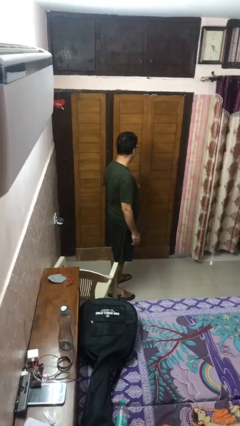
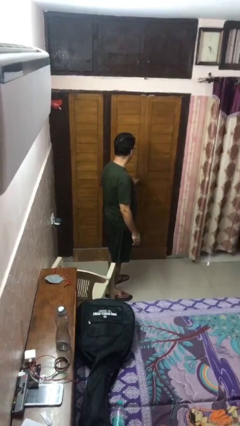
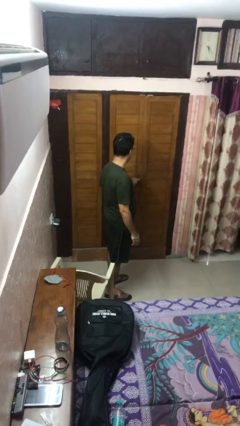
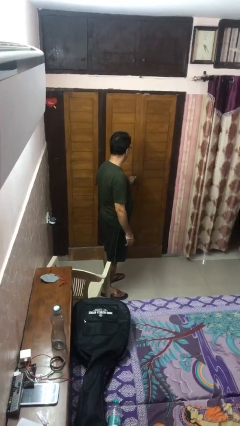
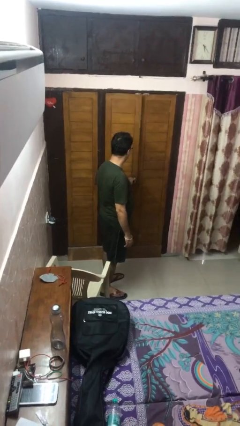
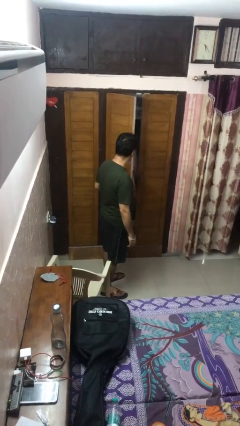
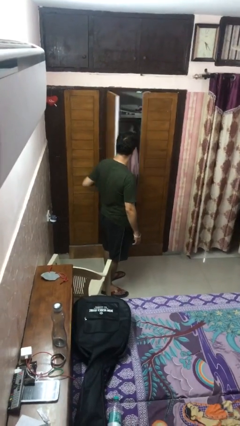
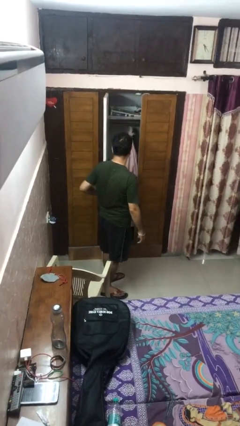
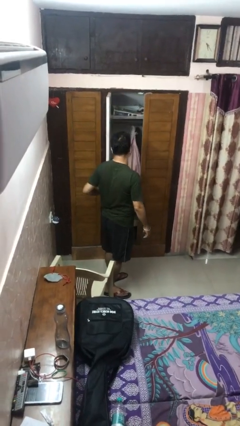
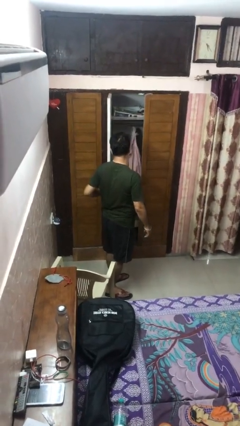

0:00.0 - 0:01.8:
person opens closet door

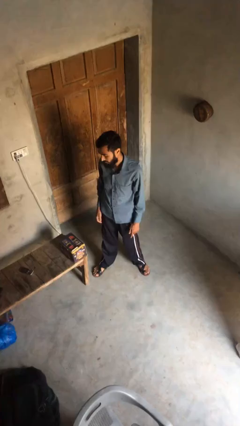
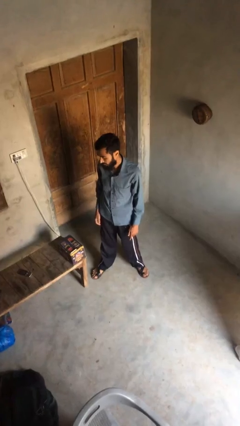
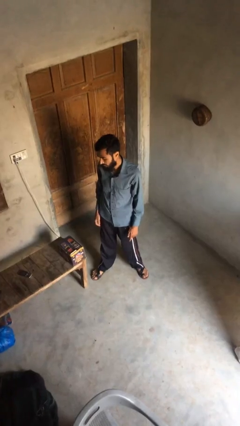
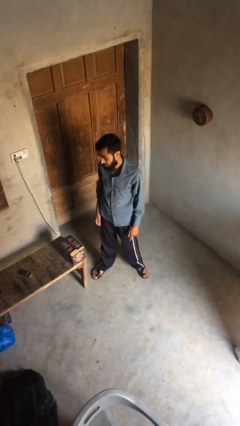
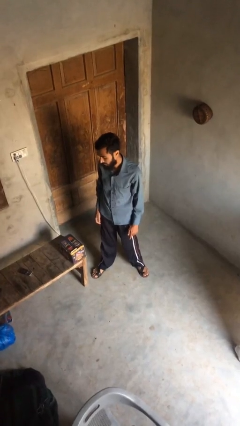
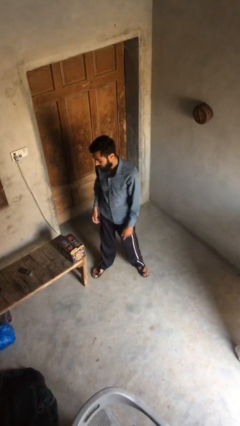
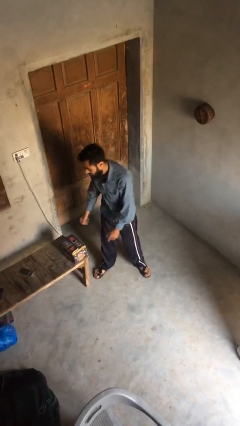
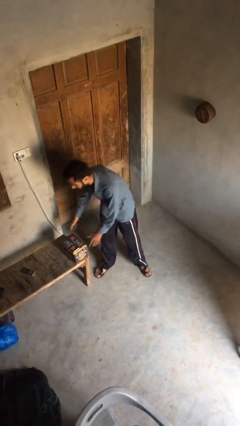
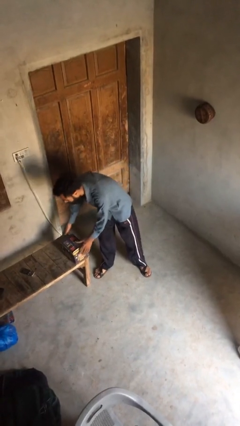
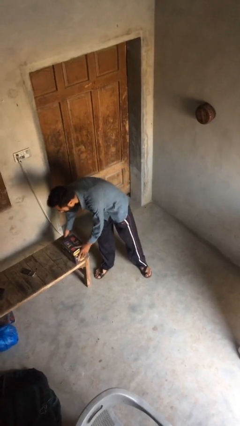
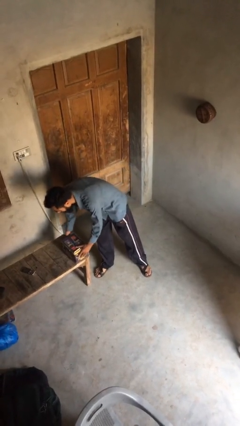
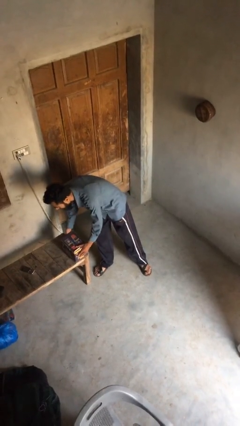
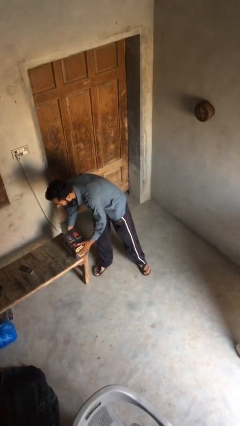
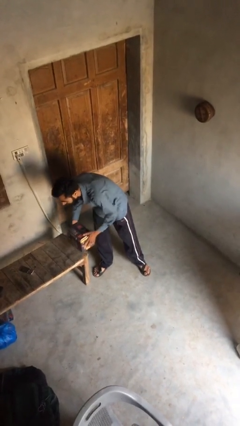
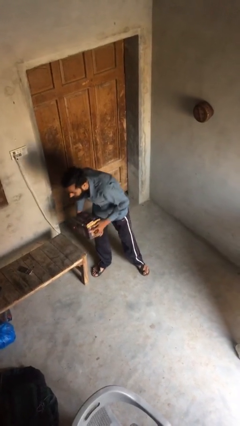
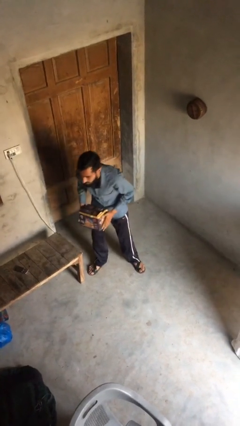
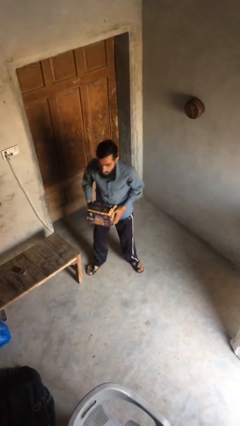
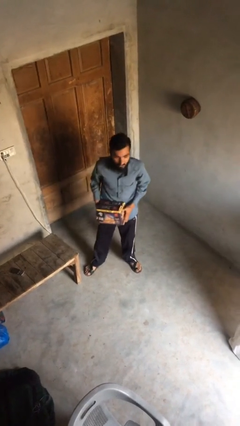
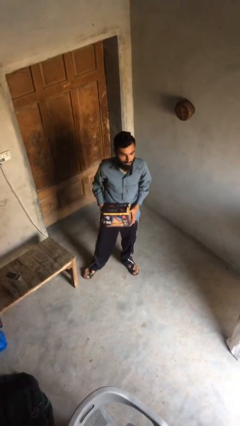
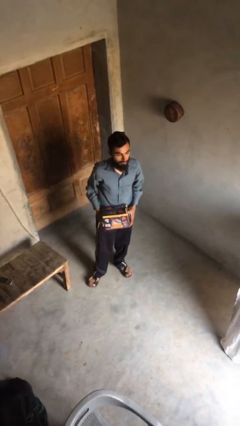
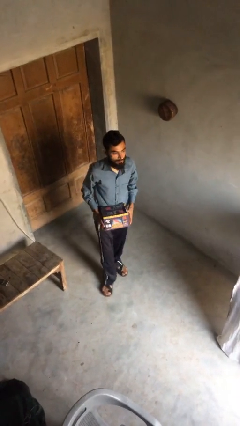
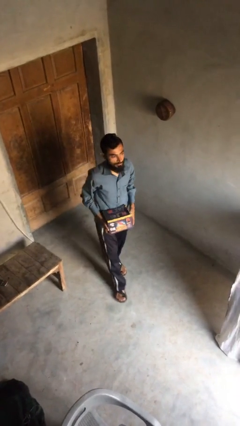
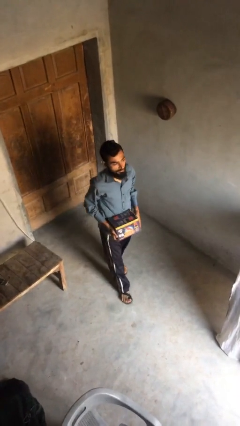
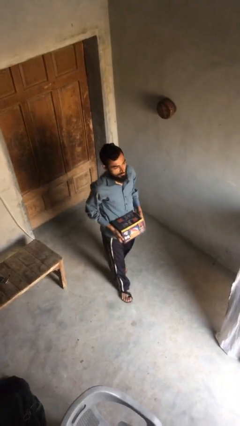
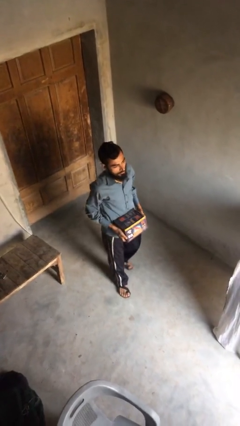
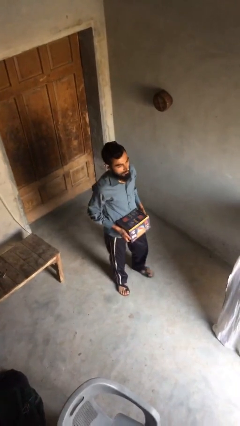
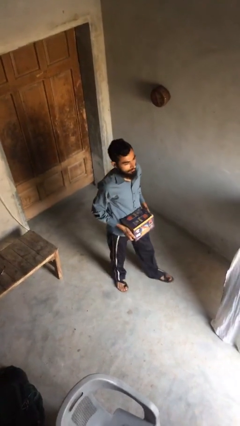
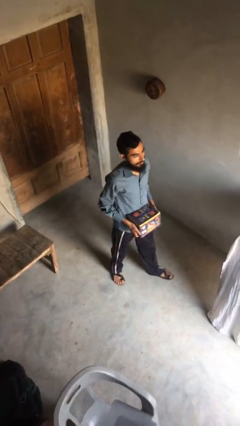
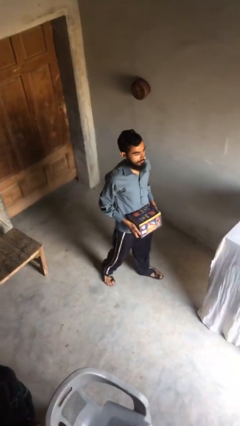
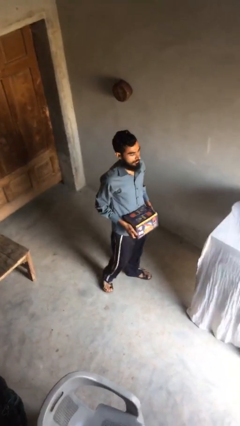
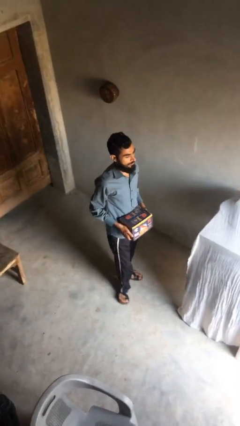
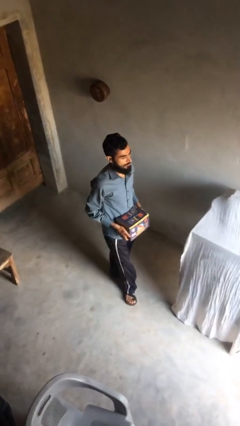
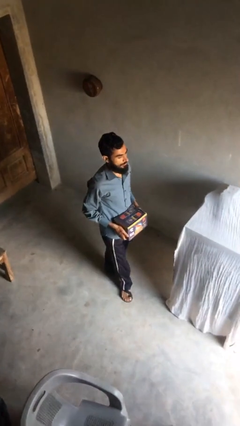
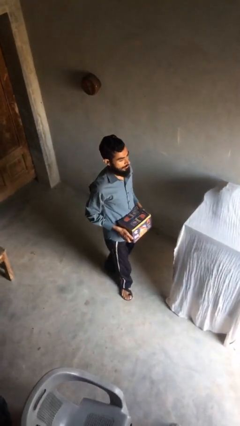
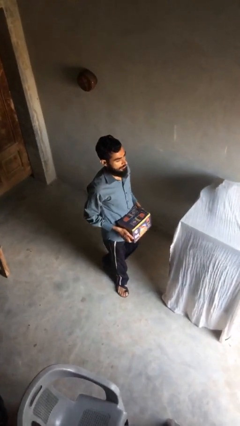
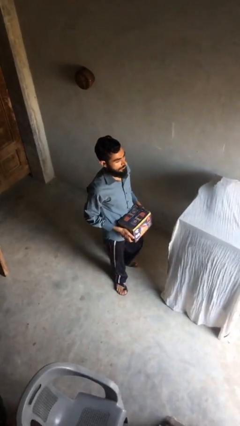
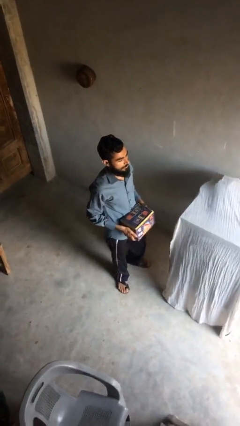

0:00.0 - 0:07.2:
person picks up object from table

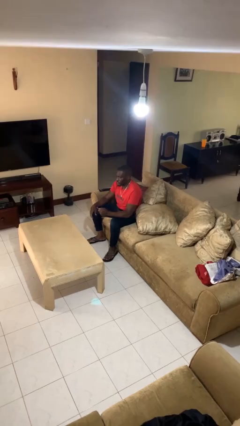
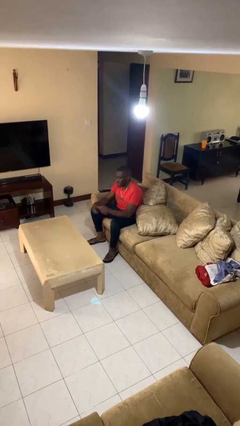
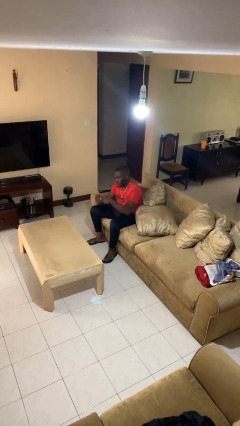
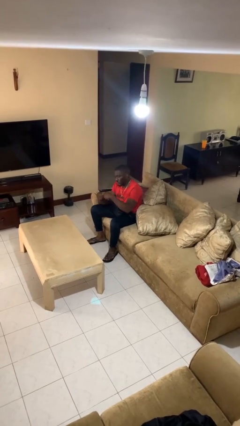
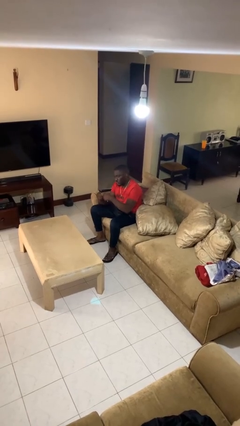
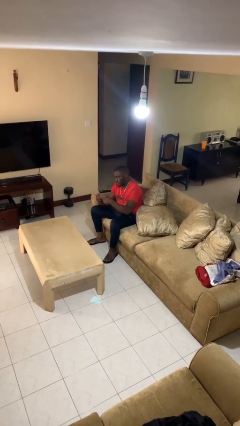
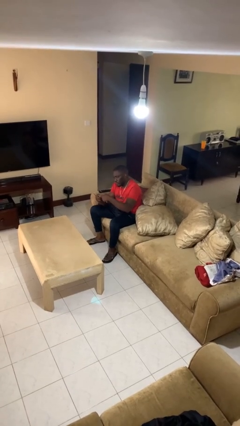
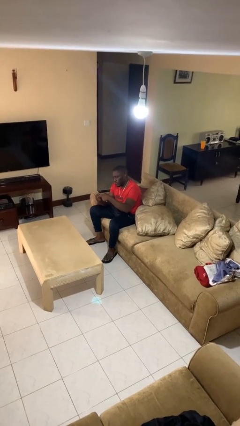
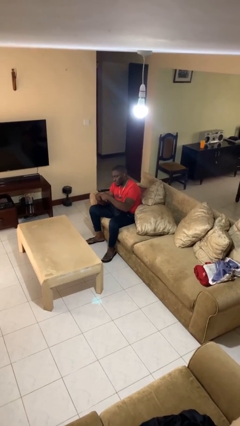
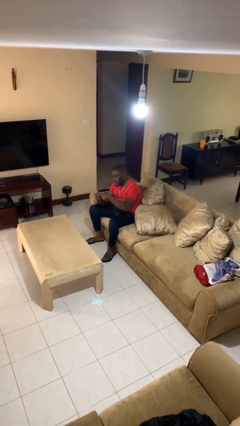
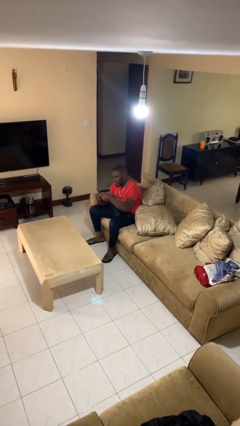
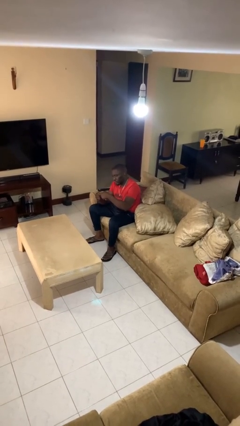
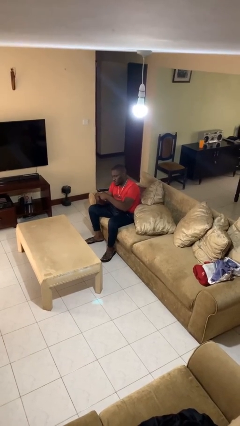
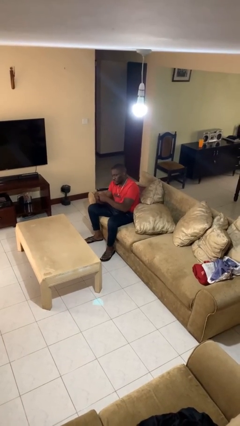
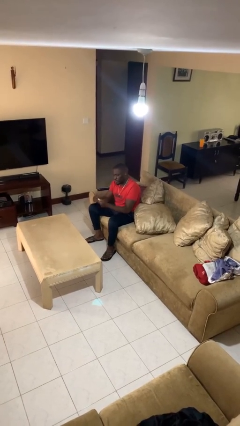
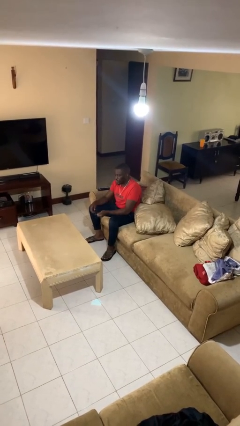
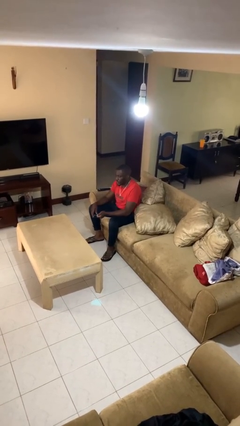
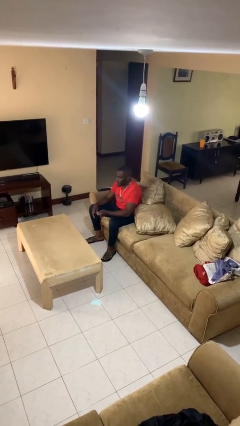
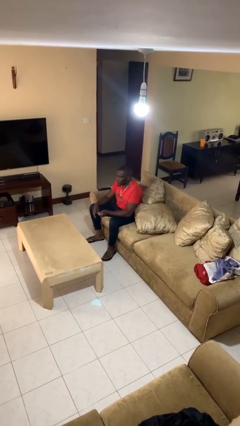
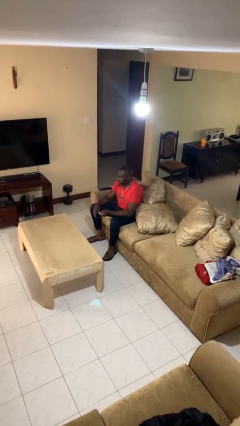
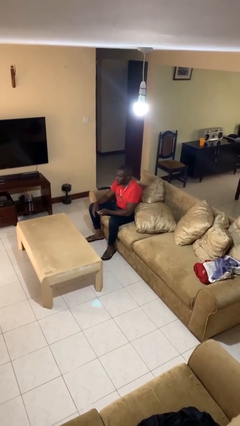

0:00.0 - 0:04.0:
person clips fingernails

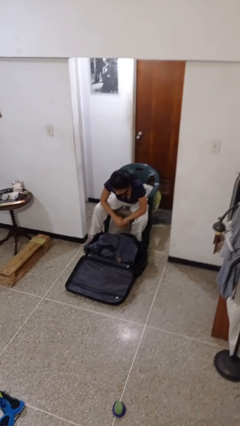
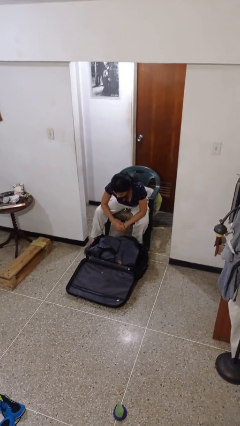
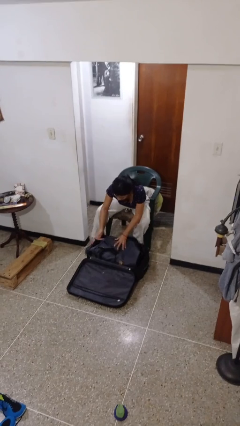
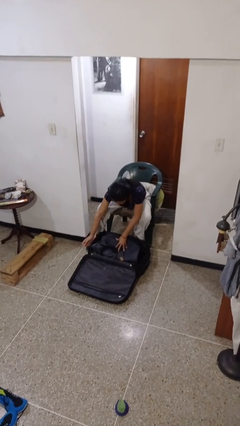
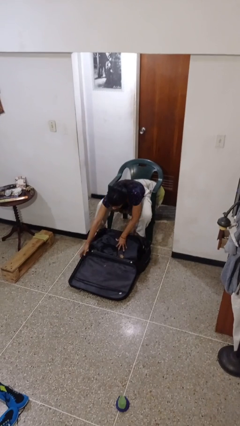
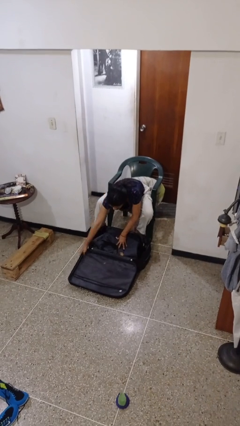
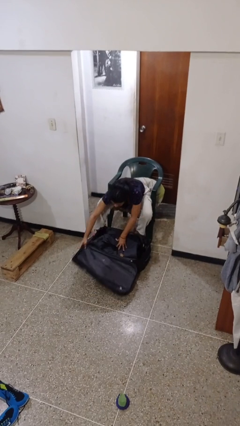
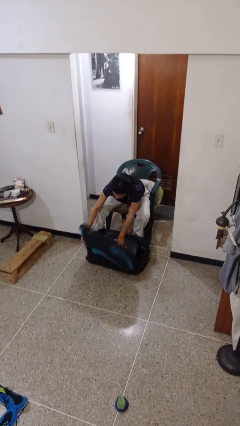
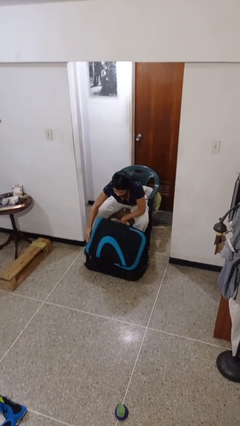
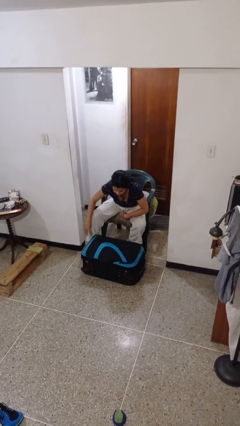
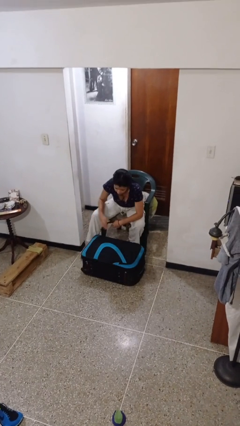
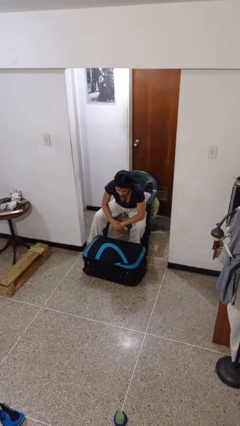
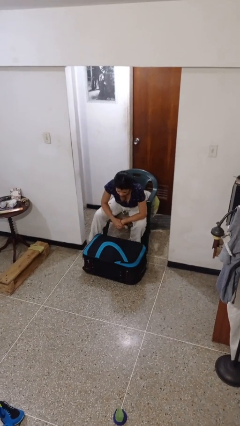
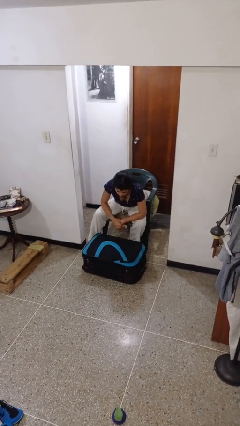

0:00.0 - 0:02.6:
person closes suitcase

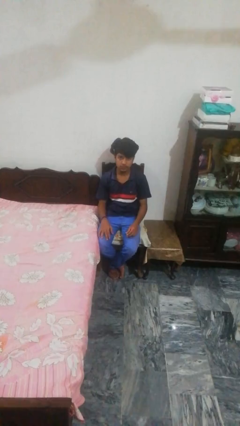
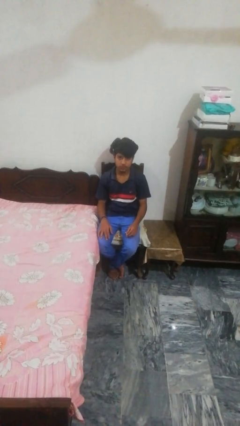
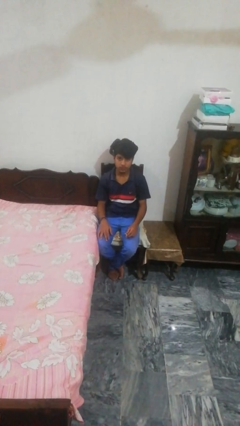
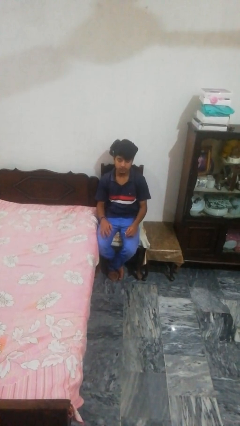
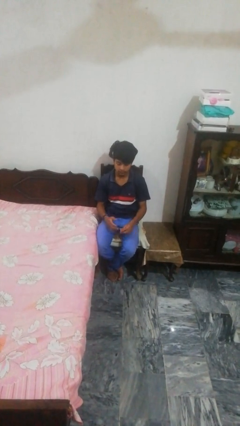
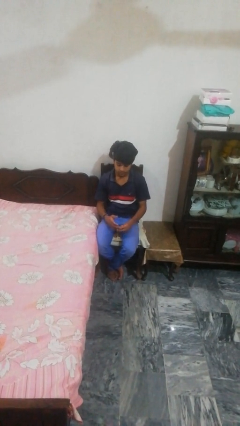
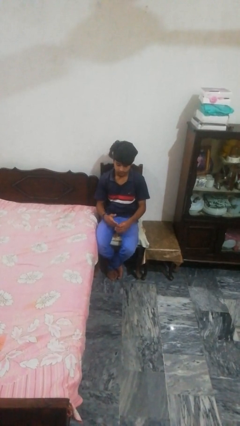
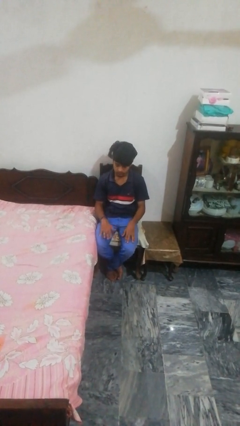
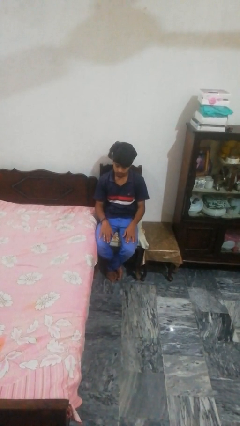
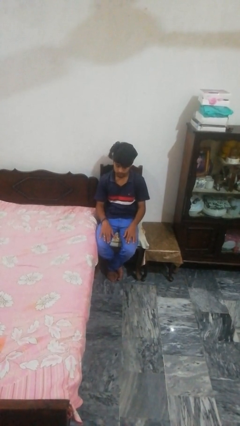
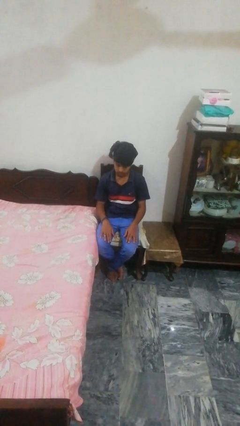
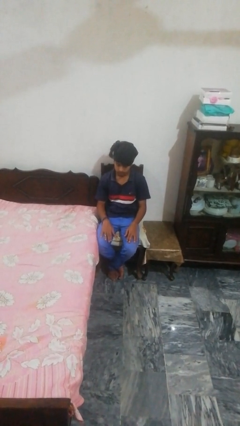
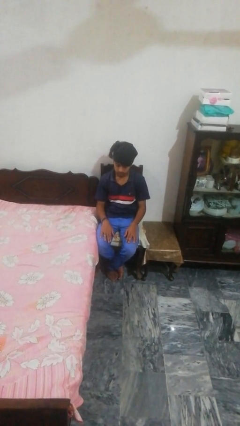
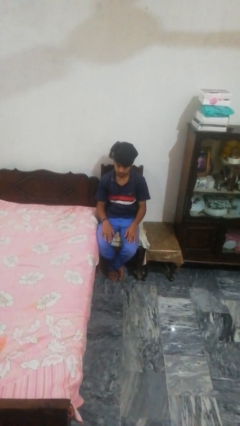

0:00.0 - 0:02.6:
person puts on ring
